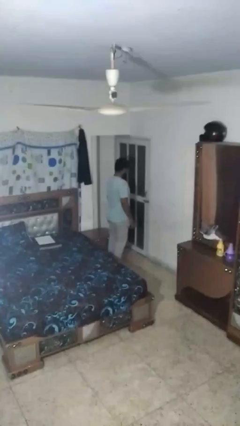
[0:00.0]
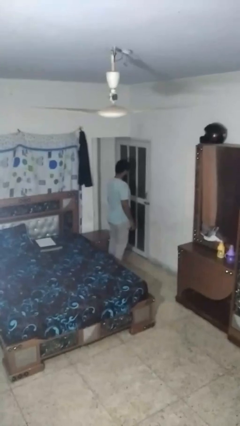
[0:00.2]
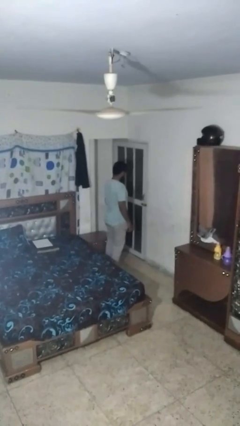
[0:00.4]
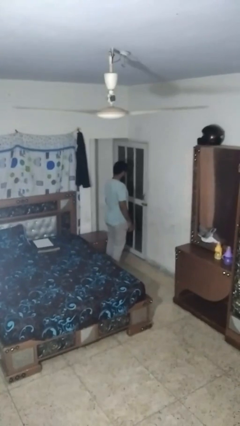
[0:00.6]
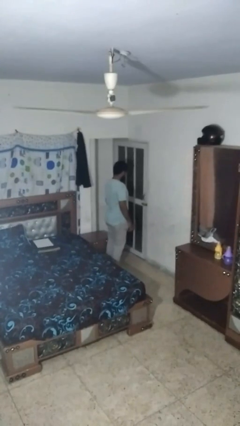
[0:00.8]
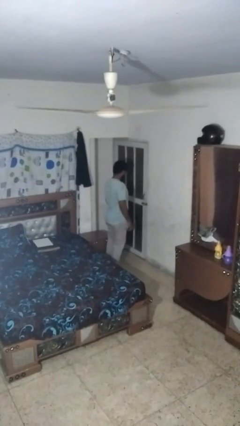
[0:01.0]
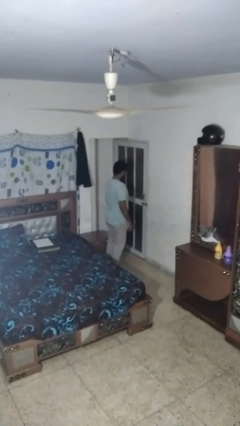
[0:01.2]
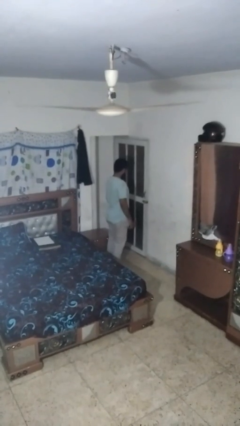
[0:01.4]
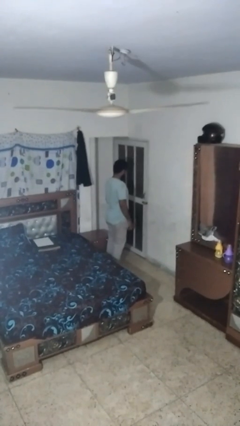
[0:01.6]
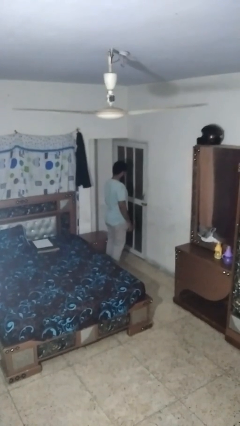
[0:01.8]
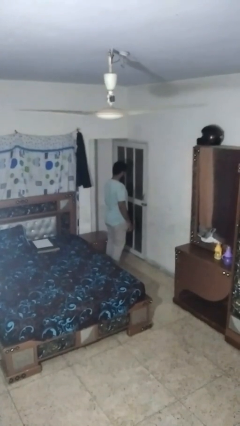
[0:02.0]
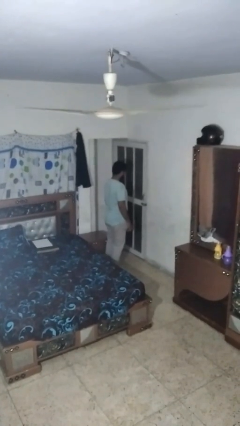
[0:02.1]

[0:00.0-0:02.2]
person unlocks door with keys

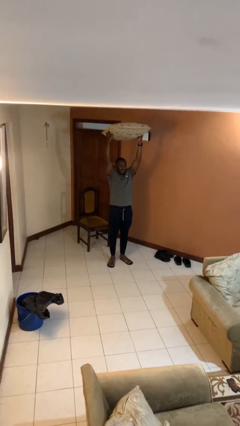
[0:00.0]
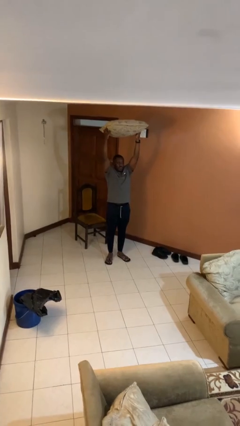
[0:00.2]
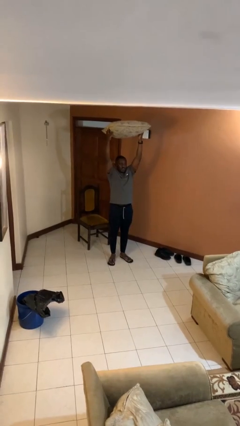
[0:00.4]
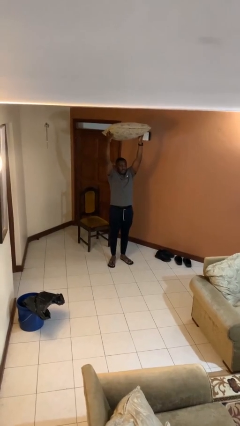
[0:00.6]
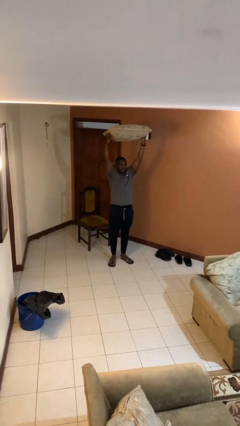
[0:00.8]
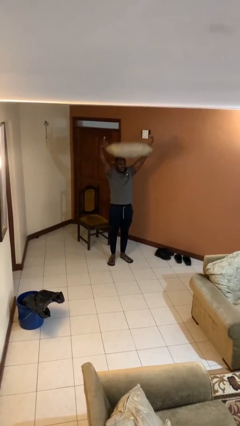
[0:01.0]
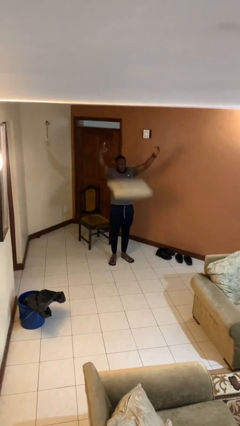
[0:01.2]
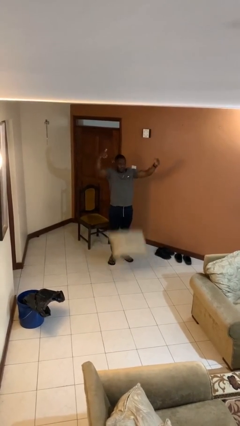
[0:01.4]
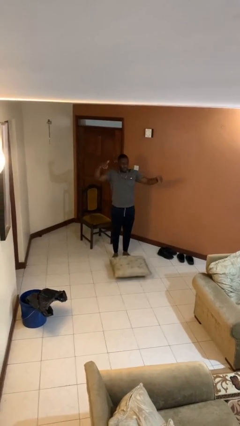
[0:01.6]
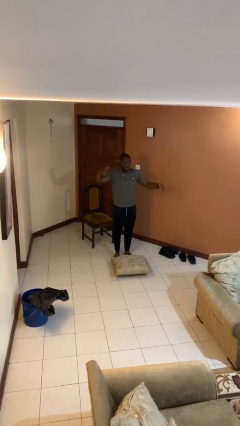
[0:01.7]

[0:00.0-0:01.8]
person drops object

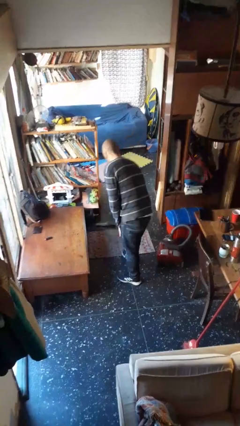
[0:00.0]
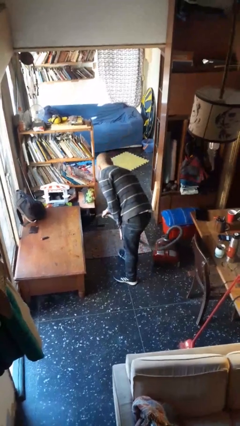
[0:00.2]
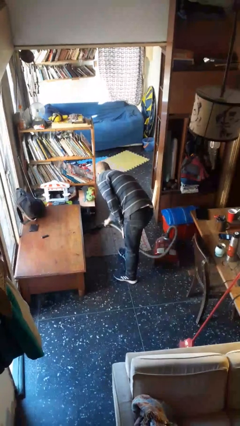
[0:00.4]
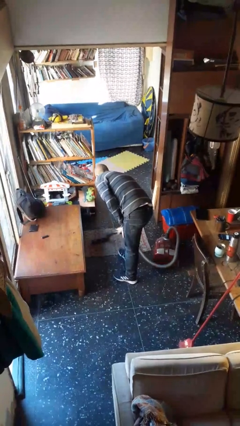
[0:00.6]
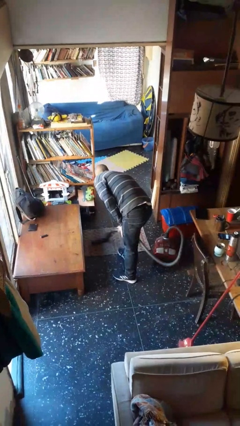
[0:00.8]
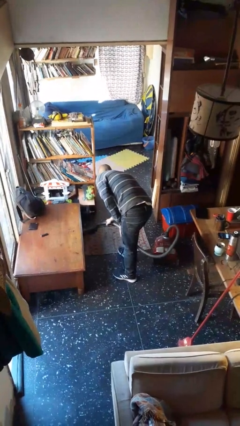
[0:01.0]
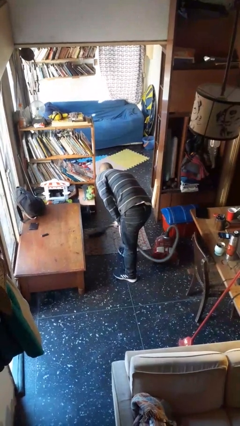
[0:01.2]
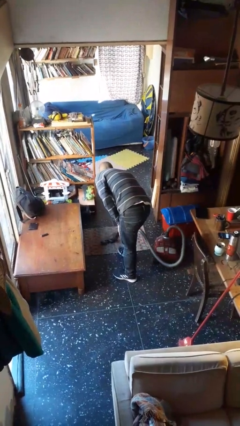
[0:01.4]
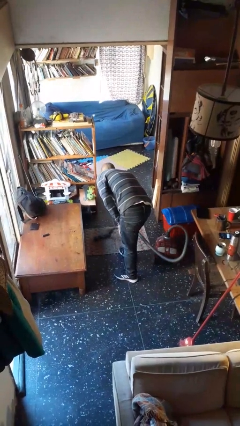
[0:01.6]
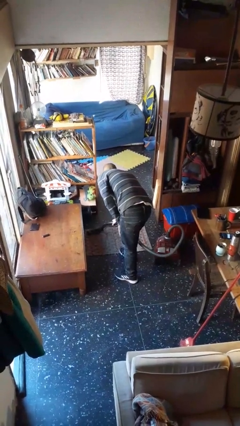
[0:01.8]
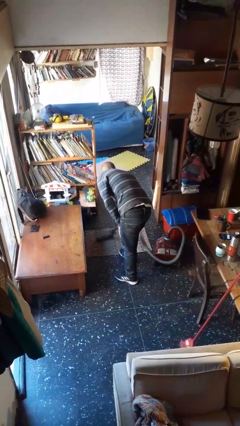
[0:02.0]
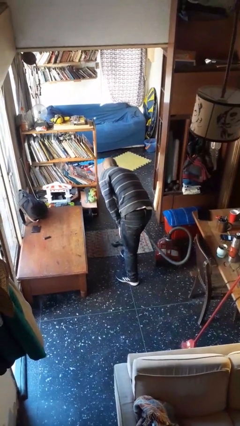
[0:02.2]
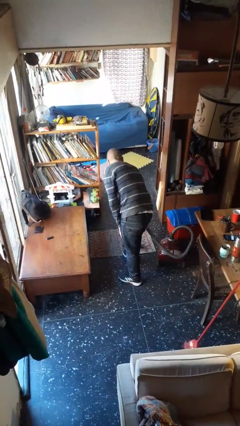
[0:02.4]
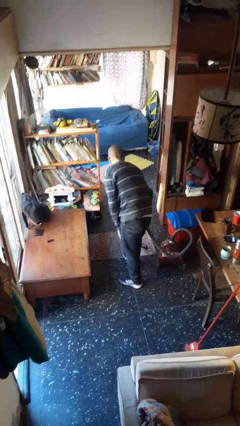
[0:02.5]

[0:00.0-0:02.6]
person vacuums carpet

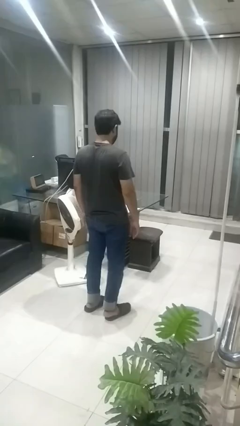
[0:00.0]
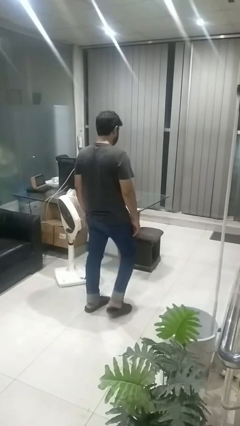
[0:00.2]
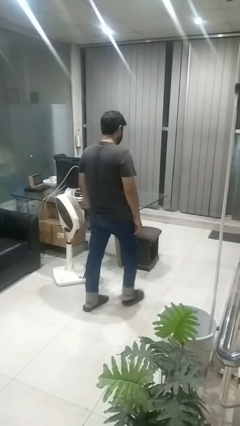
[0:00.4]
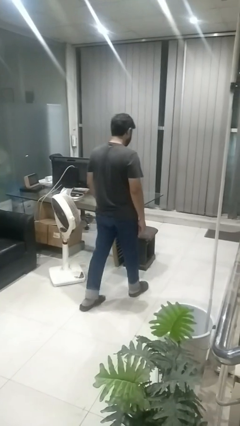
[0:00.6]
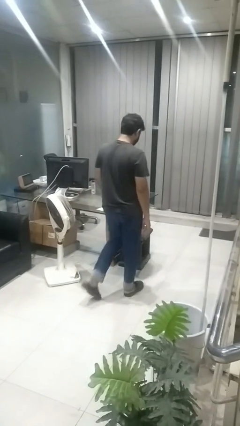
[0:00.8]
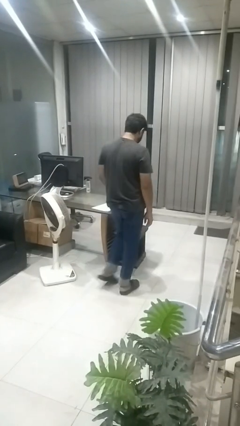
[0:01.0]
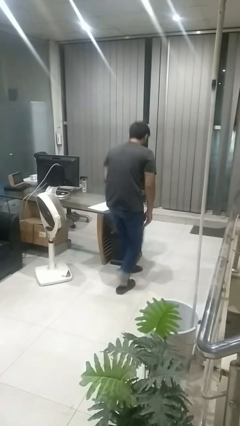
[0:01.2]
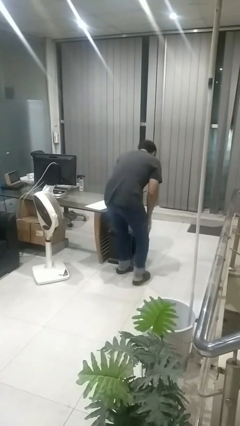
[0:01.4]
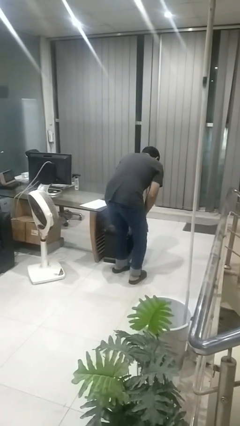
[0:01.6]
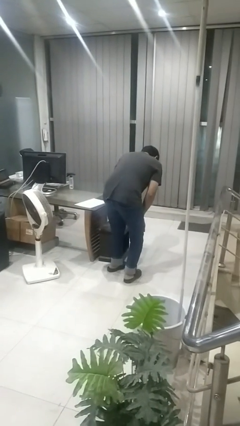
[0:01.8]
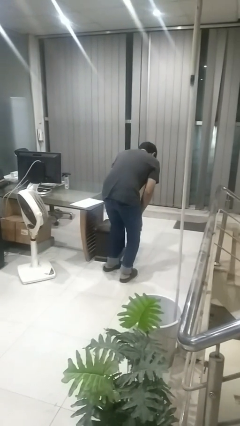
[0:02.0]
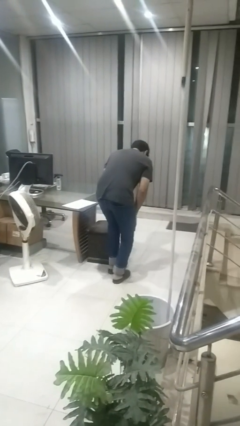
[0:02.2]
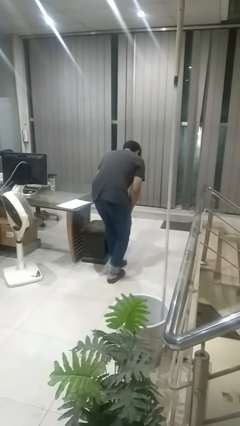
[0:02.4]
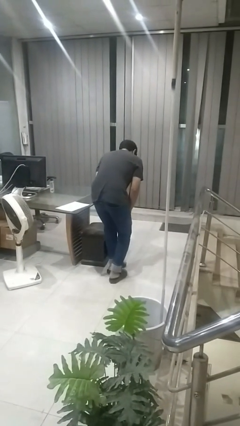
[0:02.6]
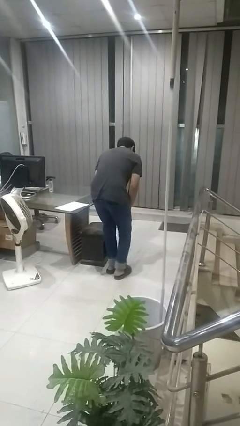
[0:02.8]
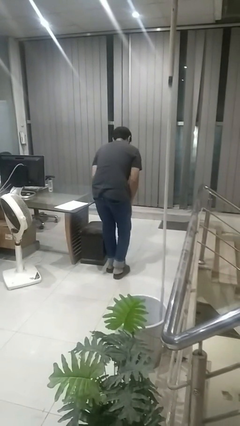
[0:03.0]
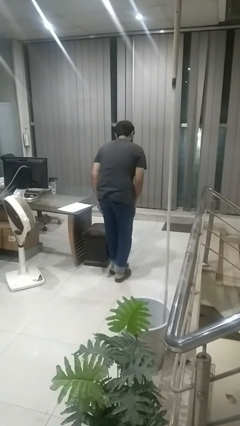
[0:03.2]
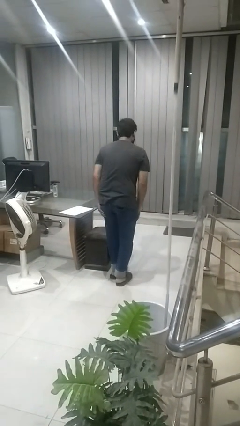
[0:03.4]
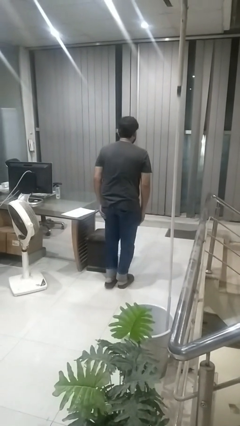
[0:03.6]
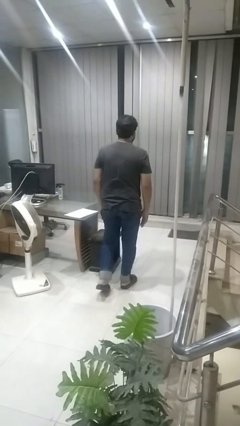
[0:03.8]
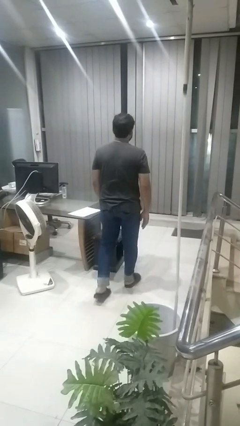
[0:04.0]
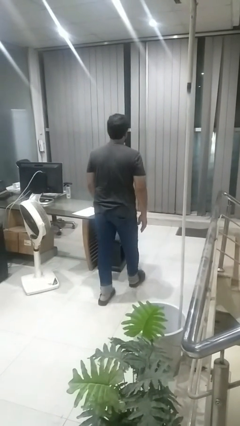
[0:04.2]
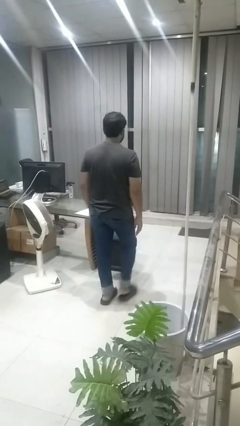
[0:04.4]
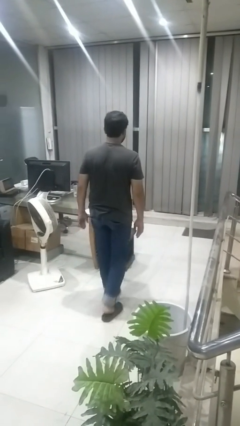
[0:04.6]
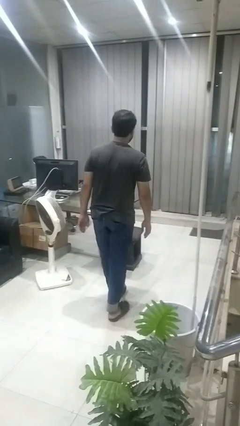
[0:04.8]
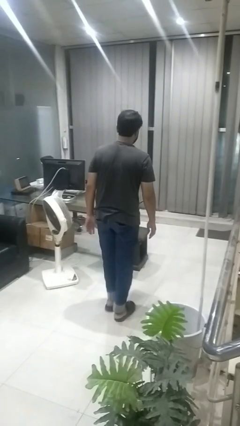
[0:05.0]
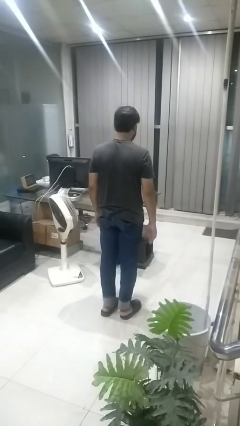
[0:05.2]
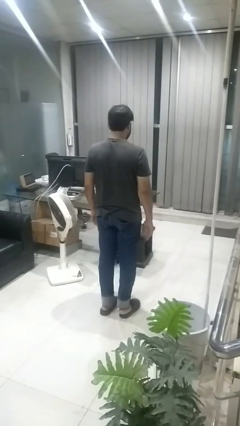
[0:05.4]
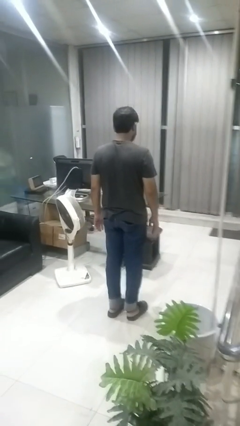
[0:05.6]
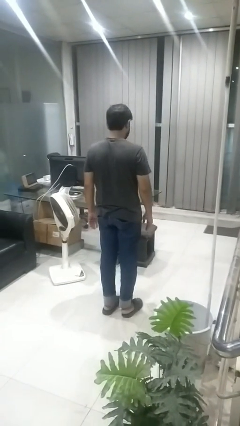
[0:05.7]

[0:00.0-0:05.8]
person bumps into table

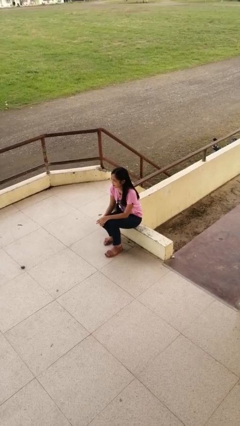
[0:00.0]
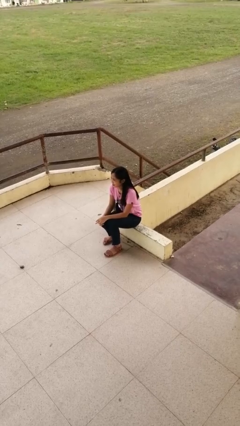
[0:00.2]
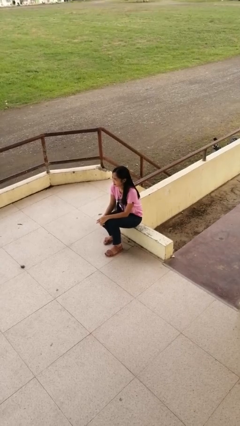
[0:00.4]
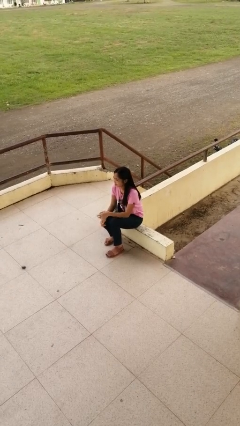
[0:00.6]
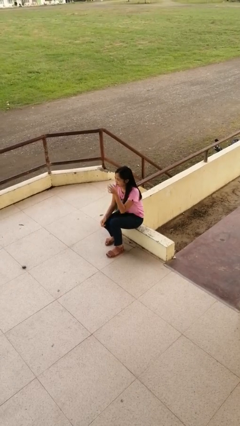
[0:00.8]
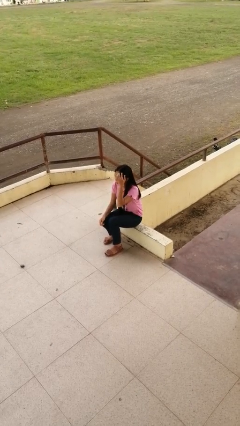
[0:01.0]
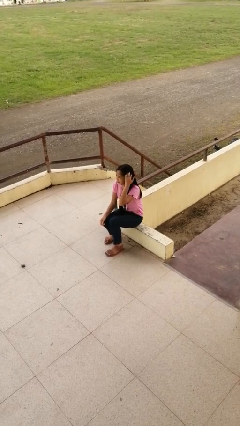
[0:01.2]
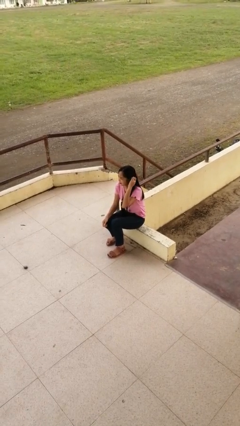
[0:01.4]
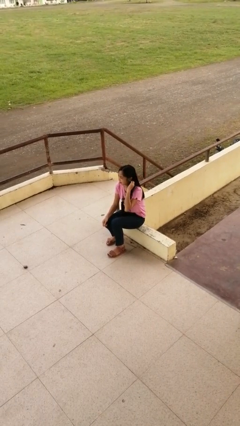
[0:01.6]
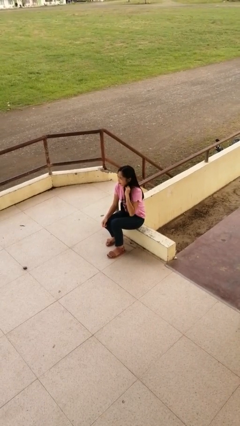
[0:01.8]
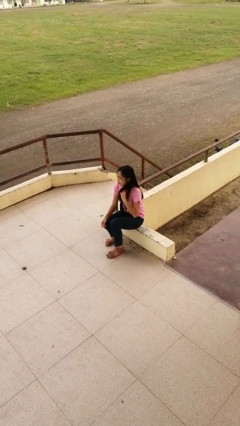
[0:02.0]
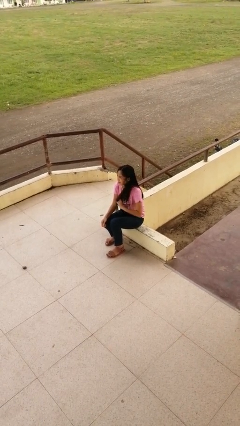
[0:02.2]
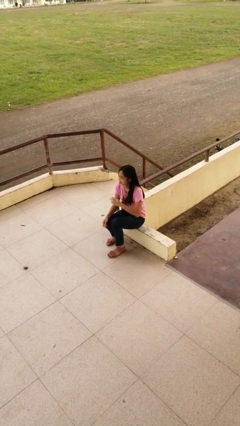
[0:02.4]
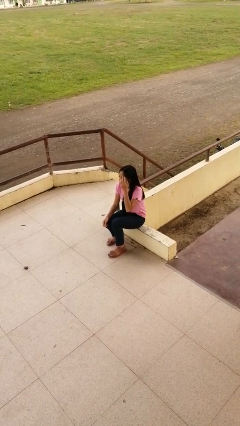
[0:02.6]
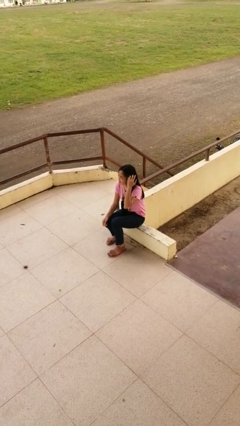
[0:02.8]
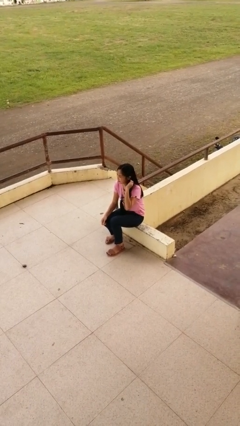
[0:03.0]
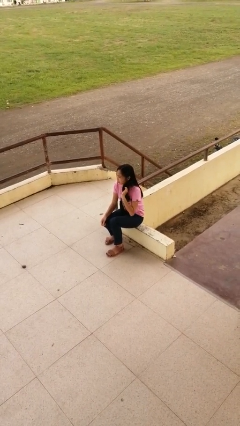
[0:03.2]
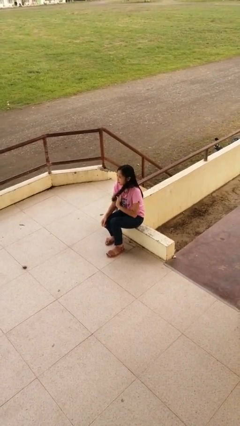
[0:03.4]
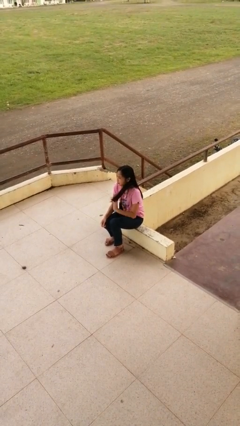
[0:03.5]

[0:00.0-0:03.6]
person strokes hair

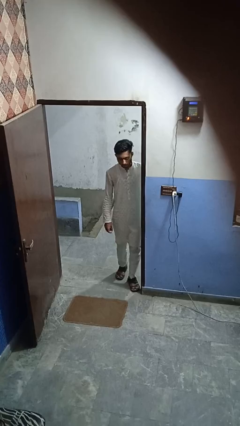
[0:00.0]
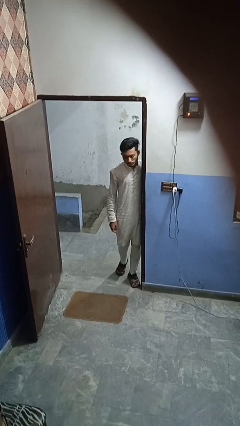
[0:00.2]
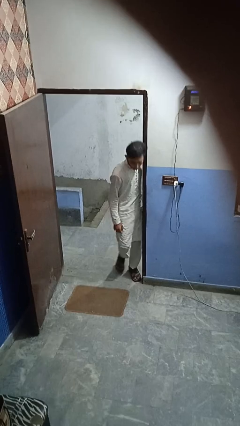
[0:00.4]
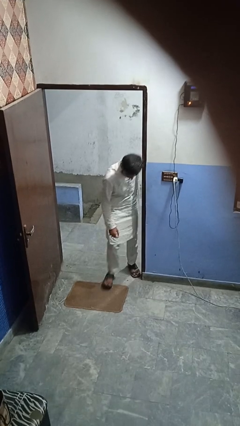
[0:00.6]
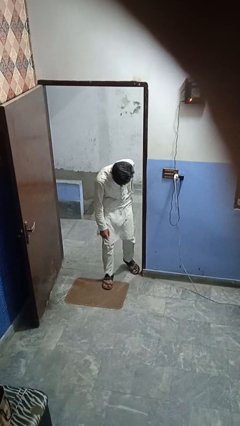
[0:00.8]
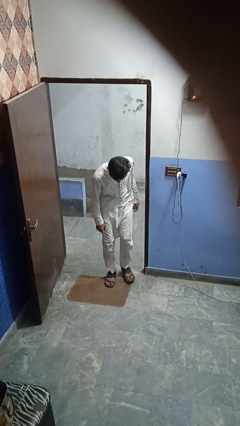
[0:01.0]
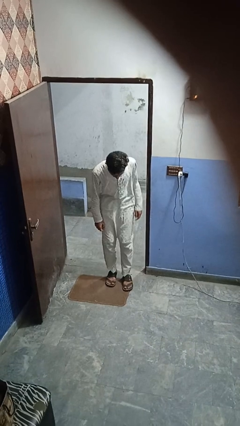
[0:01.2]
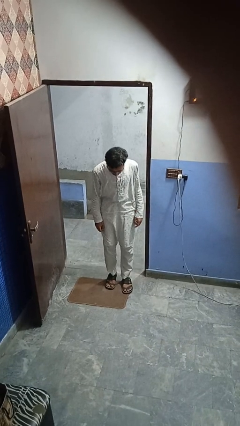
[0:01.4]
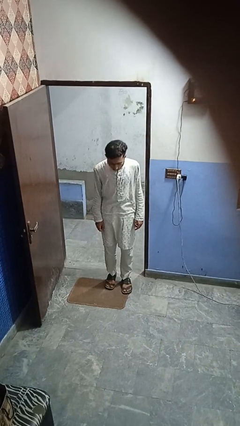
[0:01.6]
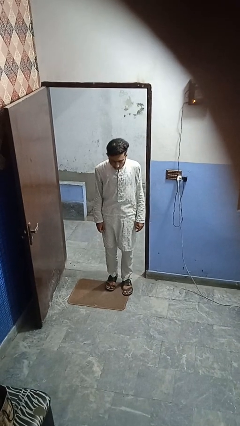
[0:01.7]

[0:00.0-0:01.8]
person bumps into wall
